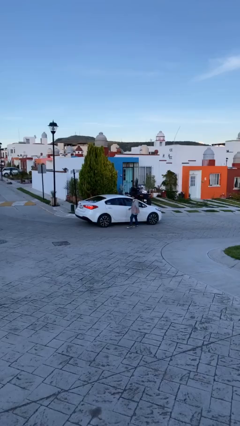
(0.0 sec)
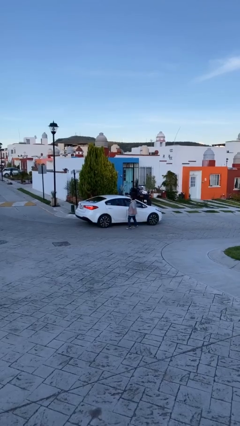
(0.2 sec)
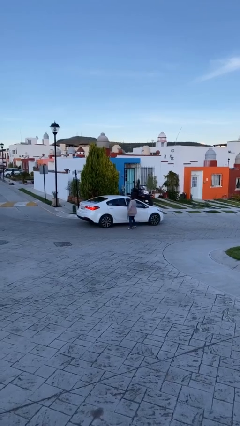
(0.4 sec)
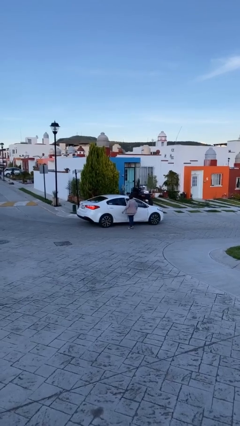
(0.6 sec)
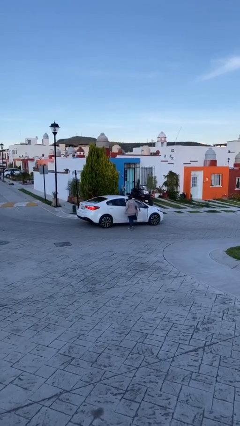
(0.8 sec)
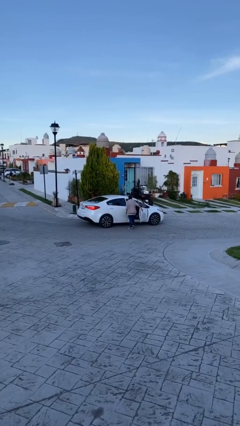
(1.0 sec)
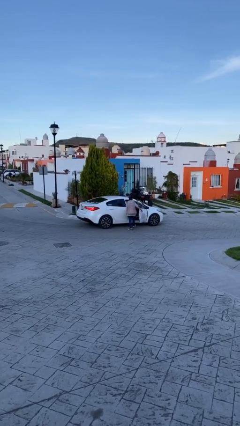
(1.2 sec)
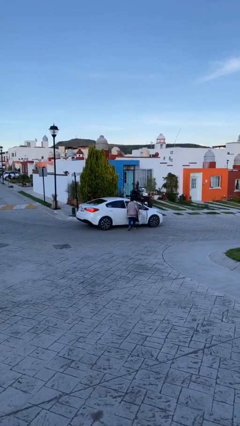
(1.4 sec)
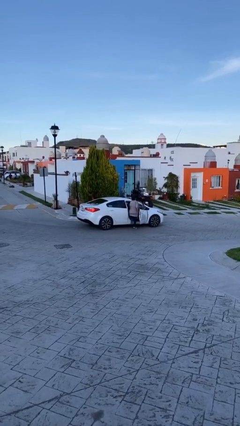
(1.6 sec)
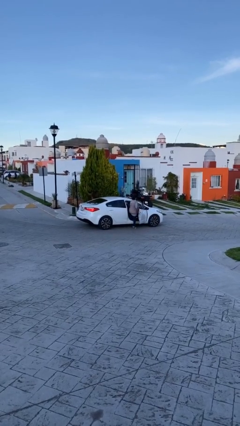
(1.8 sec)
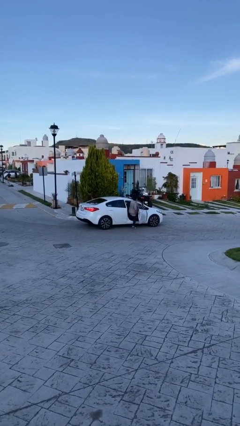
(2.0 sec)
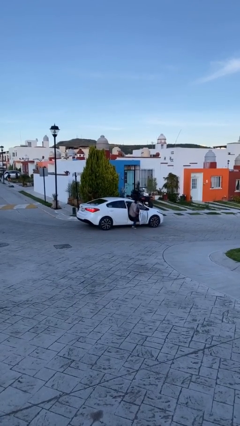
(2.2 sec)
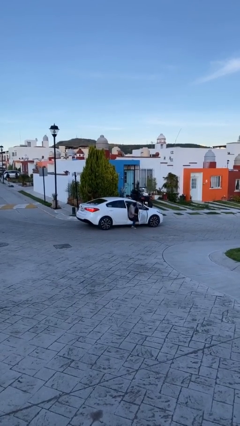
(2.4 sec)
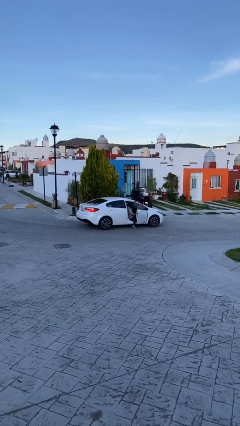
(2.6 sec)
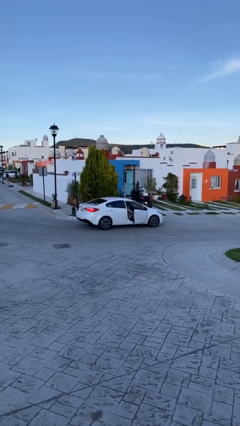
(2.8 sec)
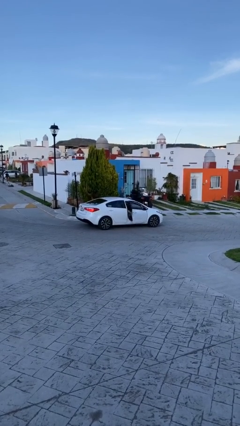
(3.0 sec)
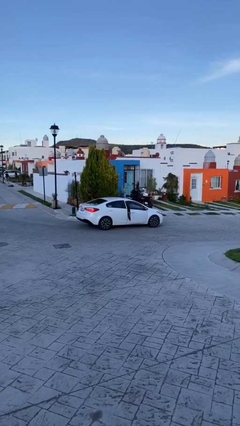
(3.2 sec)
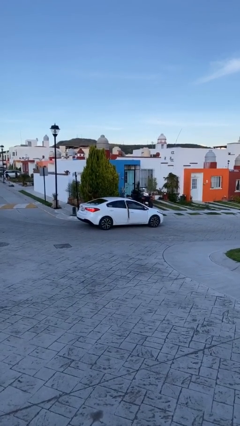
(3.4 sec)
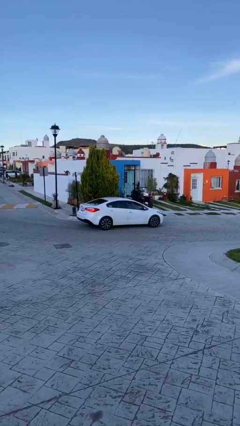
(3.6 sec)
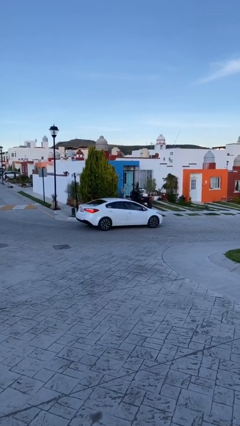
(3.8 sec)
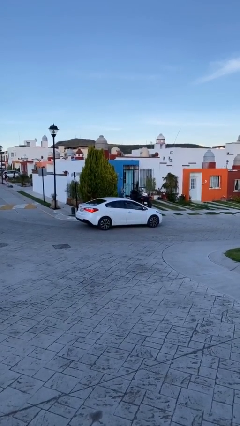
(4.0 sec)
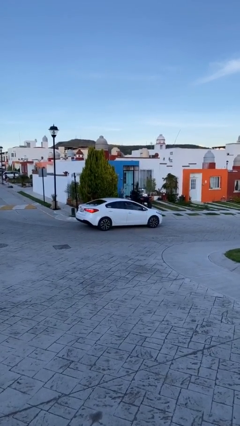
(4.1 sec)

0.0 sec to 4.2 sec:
car picks up person

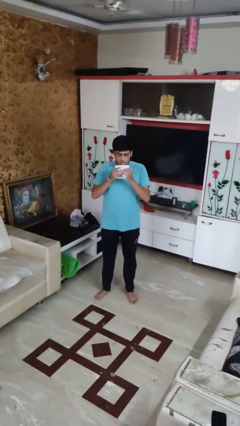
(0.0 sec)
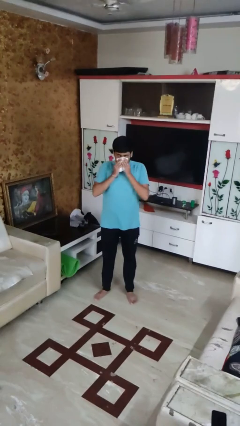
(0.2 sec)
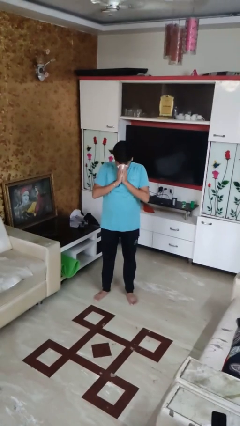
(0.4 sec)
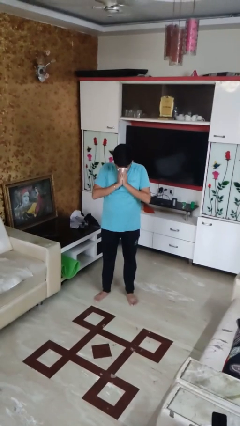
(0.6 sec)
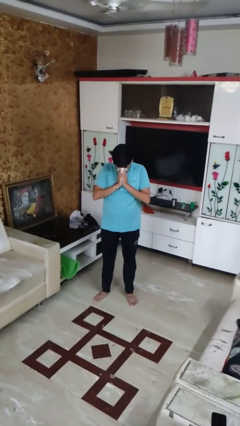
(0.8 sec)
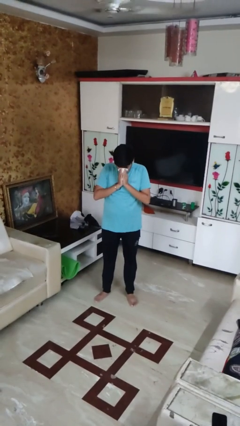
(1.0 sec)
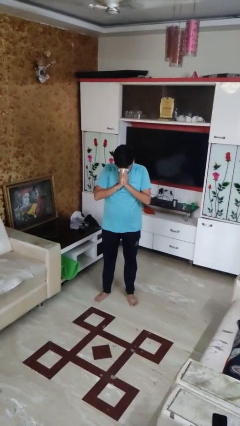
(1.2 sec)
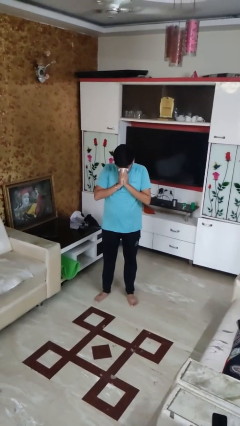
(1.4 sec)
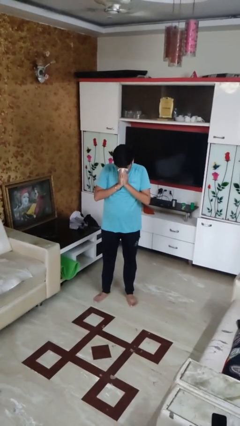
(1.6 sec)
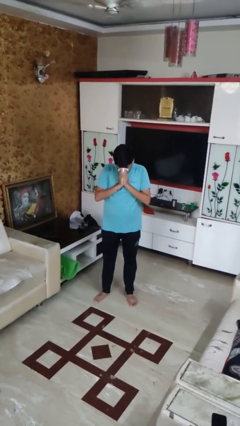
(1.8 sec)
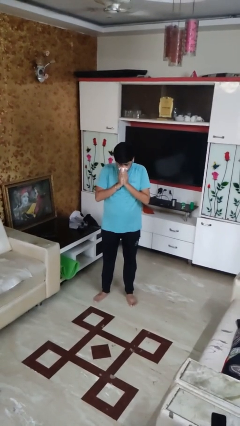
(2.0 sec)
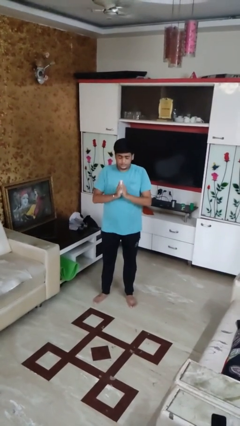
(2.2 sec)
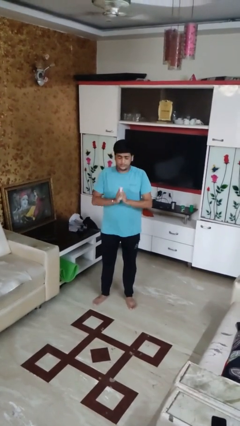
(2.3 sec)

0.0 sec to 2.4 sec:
person blows nose

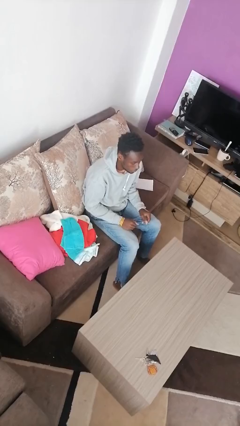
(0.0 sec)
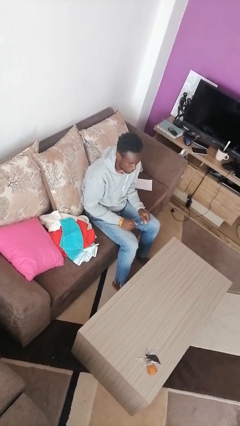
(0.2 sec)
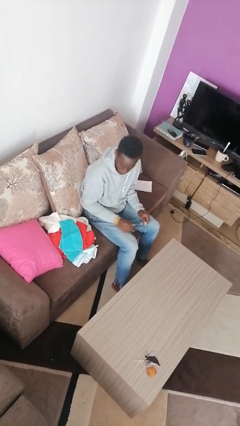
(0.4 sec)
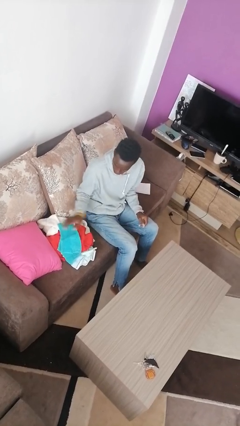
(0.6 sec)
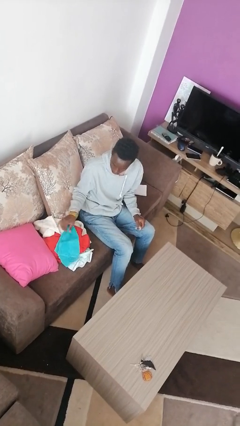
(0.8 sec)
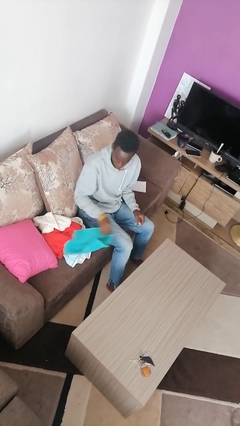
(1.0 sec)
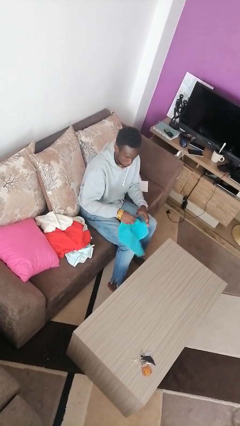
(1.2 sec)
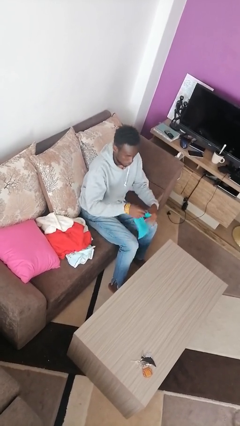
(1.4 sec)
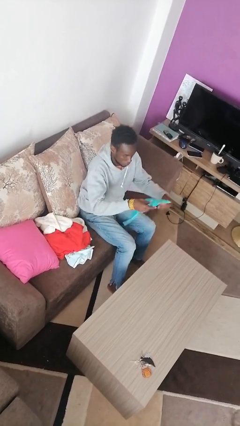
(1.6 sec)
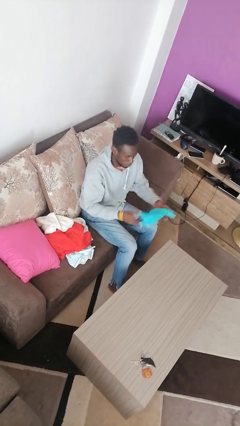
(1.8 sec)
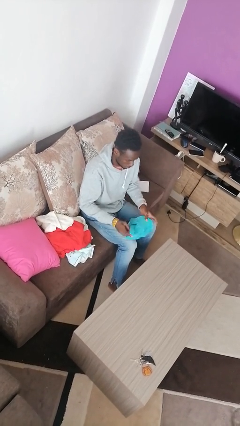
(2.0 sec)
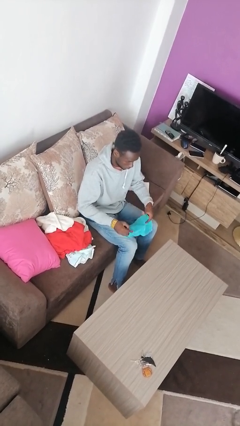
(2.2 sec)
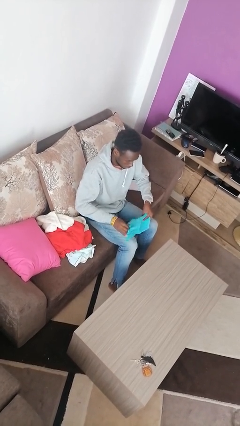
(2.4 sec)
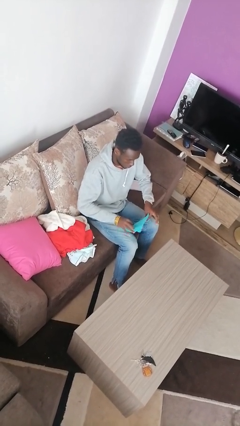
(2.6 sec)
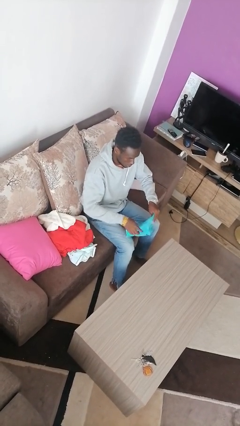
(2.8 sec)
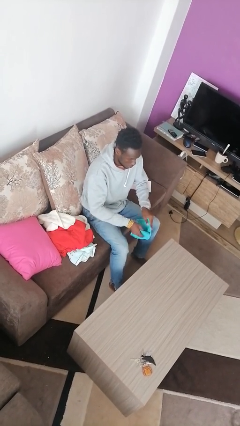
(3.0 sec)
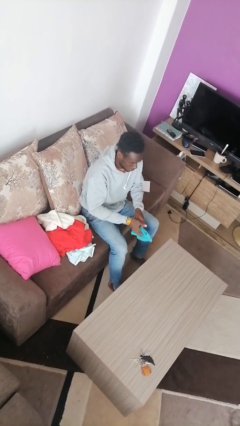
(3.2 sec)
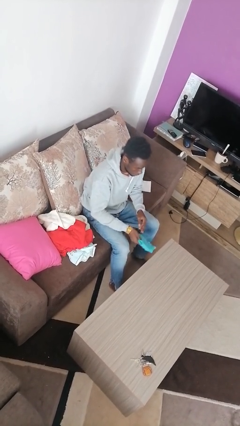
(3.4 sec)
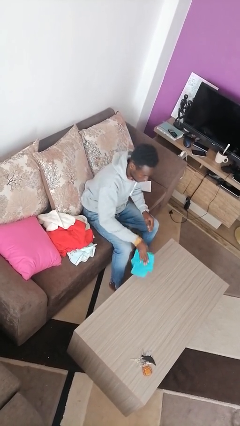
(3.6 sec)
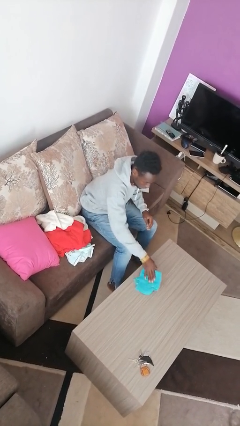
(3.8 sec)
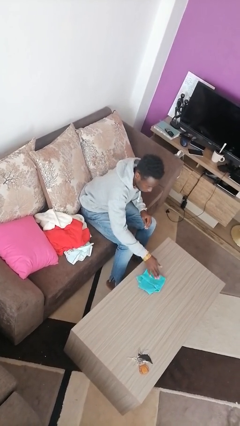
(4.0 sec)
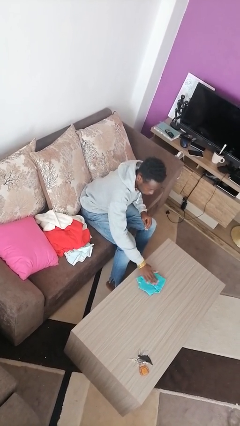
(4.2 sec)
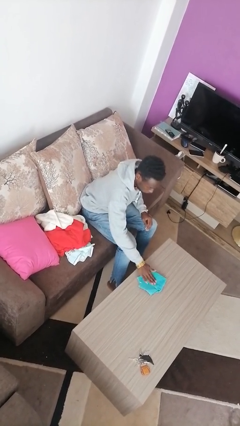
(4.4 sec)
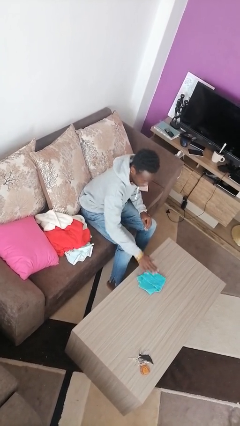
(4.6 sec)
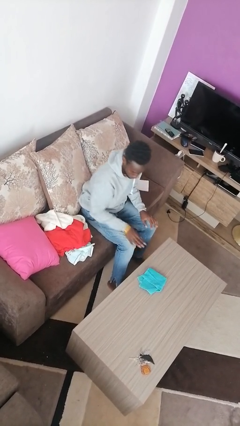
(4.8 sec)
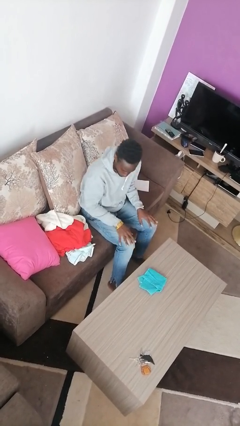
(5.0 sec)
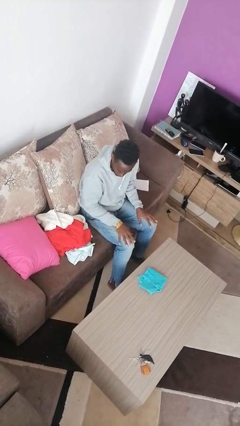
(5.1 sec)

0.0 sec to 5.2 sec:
person folds towel

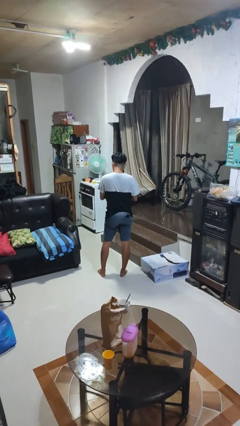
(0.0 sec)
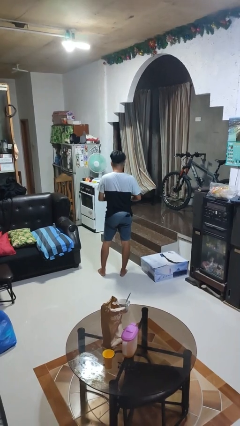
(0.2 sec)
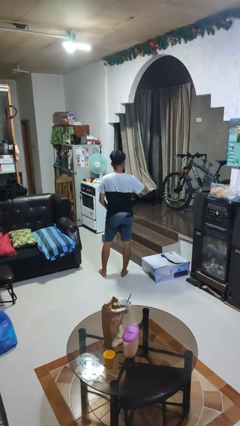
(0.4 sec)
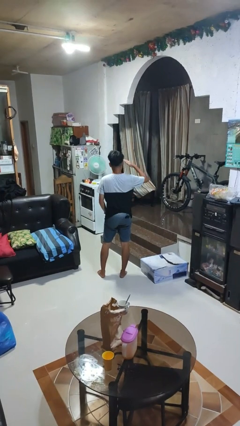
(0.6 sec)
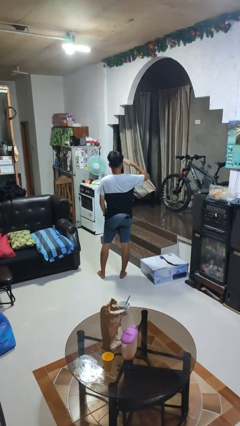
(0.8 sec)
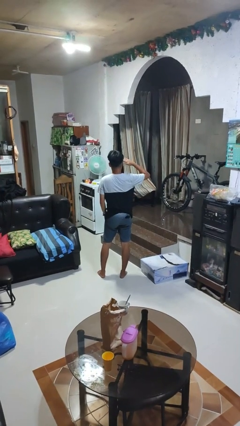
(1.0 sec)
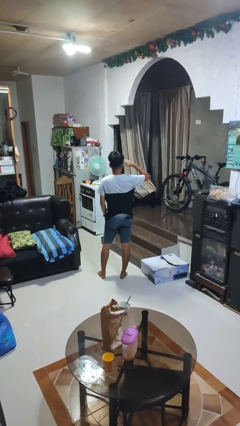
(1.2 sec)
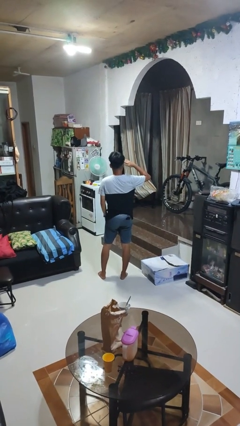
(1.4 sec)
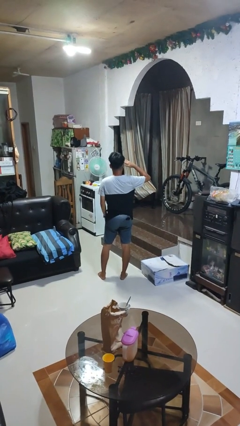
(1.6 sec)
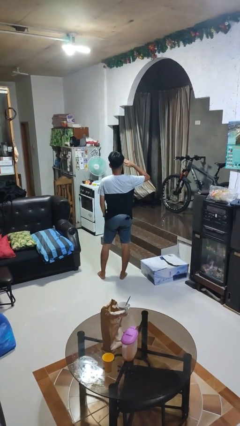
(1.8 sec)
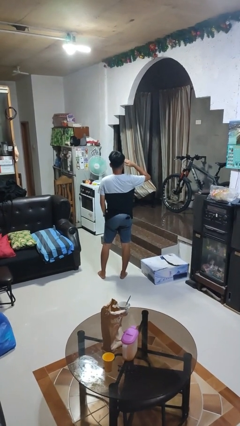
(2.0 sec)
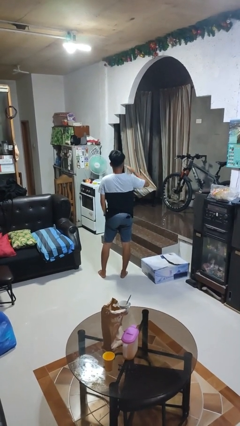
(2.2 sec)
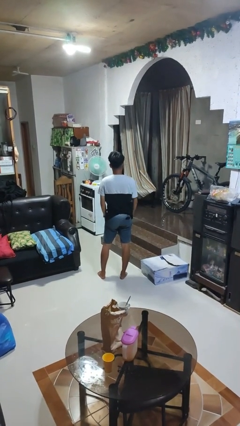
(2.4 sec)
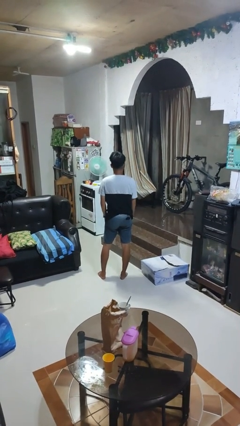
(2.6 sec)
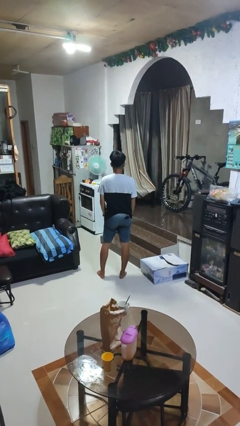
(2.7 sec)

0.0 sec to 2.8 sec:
person salutes

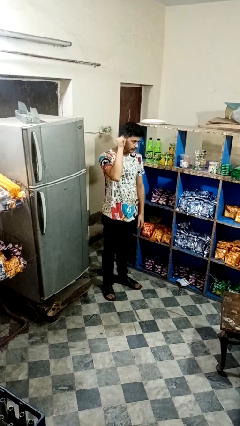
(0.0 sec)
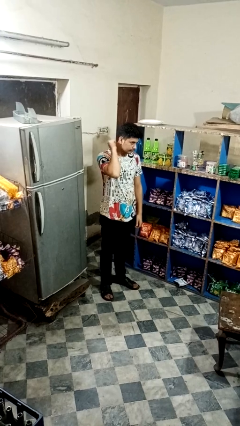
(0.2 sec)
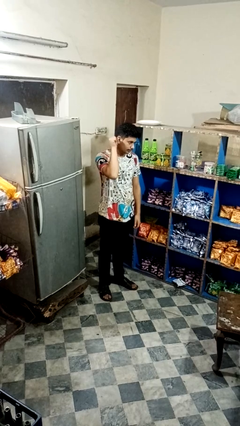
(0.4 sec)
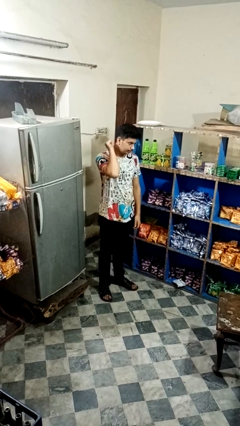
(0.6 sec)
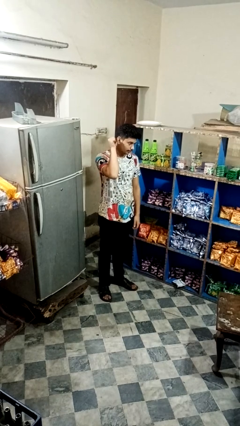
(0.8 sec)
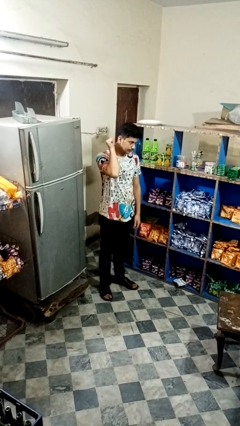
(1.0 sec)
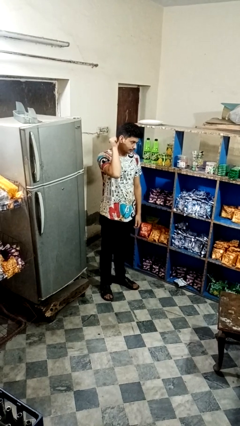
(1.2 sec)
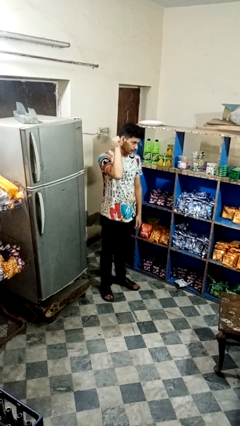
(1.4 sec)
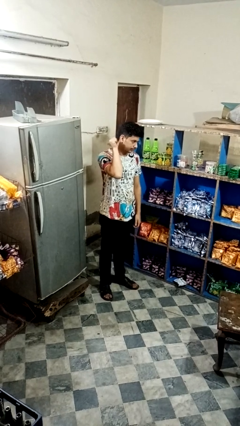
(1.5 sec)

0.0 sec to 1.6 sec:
person gestures behind me

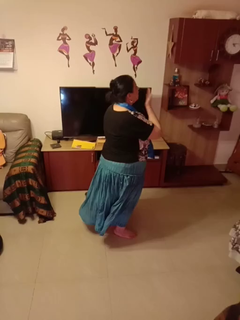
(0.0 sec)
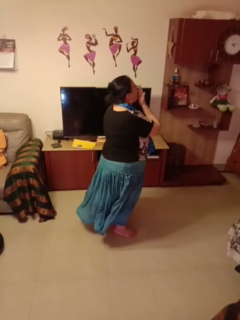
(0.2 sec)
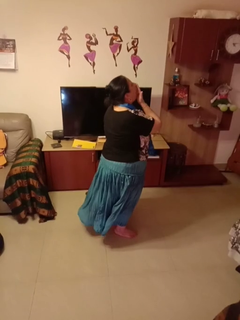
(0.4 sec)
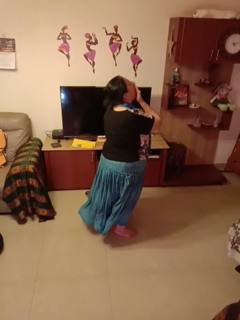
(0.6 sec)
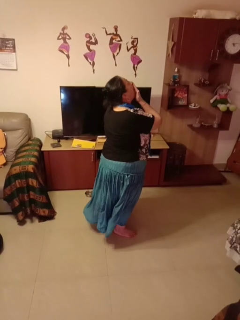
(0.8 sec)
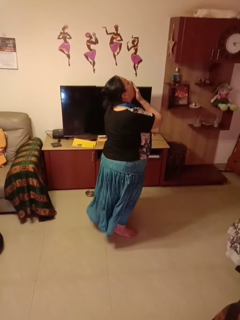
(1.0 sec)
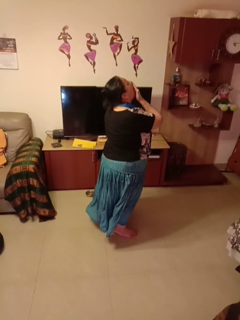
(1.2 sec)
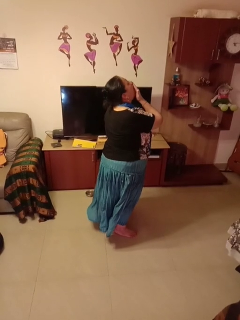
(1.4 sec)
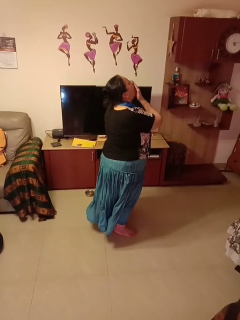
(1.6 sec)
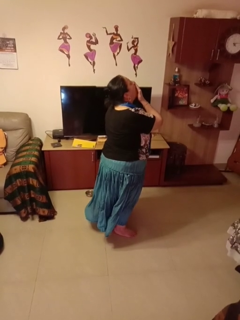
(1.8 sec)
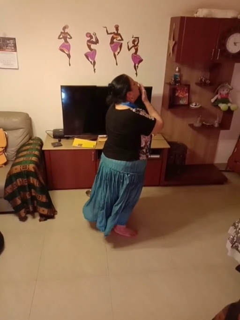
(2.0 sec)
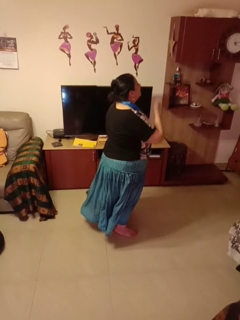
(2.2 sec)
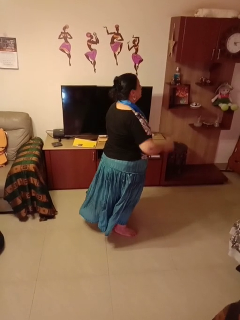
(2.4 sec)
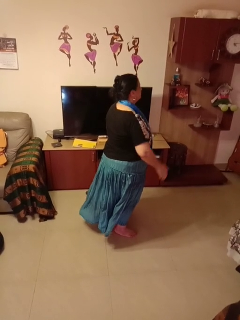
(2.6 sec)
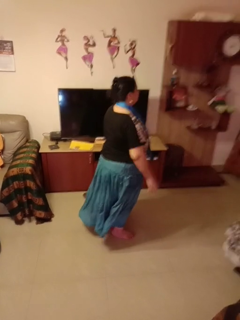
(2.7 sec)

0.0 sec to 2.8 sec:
person yawns
